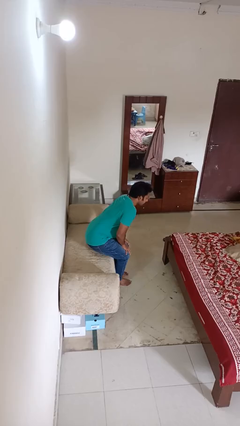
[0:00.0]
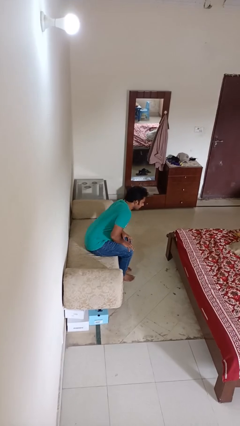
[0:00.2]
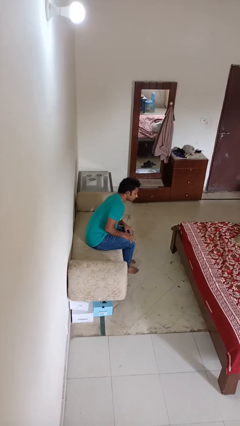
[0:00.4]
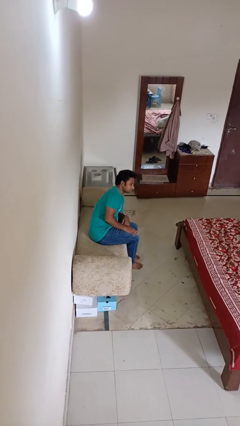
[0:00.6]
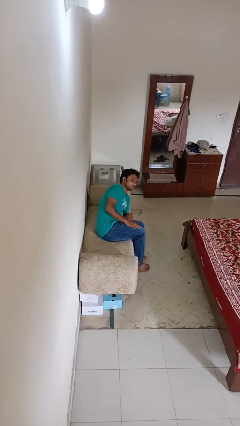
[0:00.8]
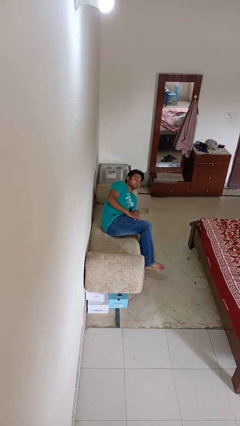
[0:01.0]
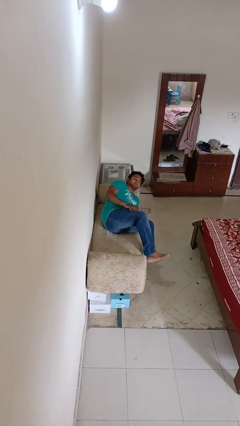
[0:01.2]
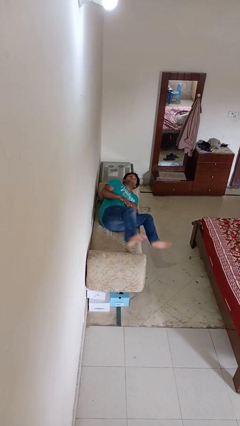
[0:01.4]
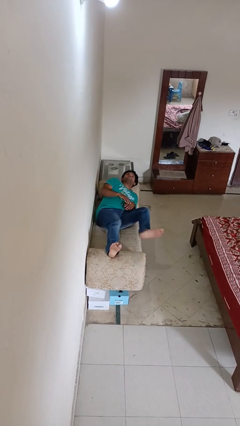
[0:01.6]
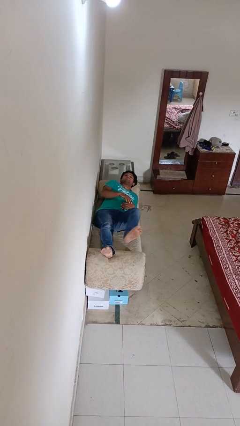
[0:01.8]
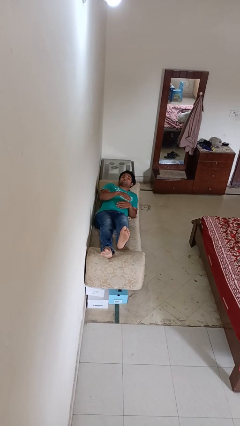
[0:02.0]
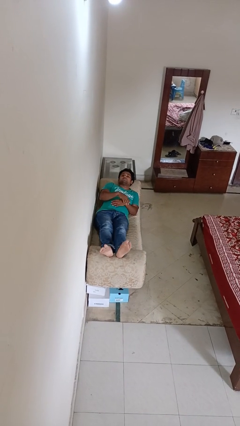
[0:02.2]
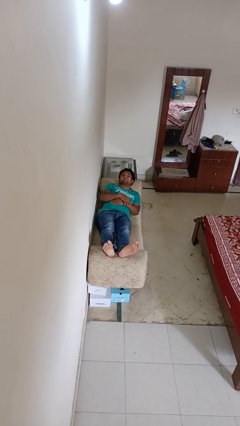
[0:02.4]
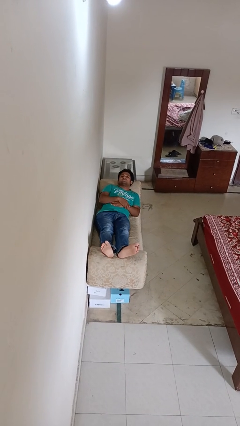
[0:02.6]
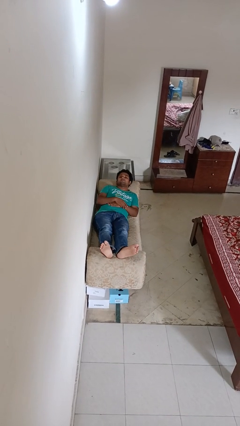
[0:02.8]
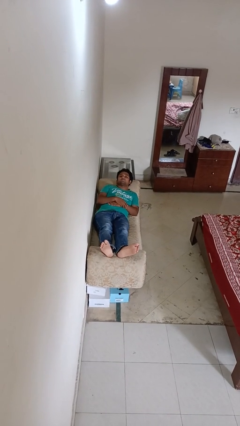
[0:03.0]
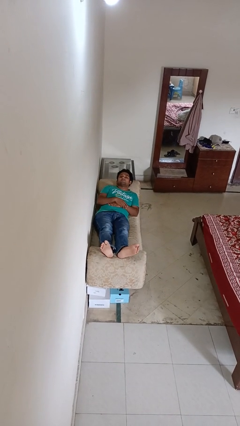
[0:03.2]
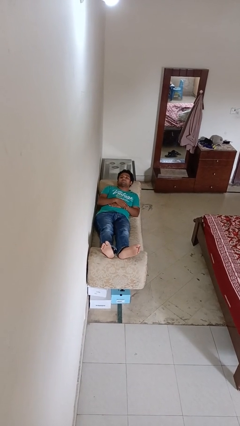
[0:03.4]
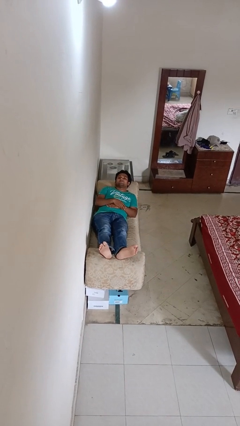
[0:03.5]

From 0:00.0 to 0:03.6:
person lies down on couch

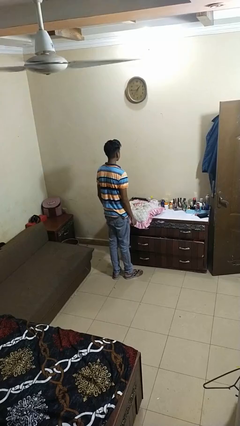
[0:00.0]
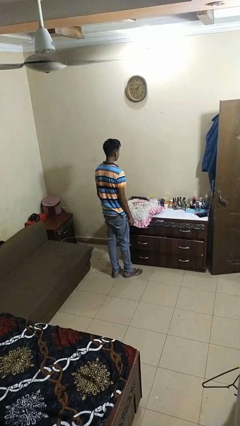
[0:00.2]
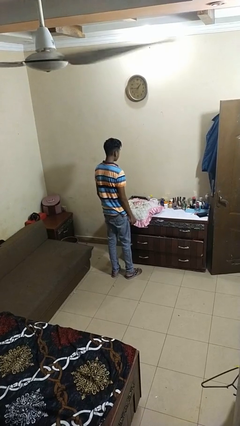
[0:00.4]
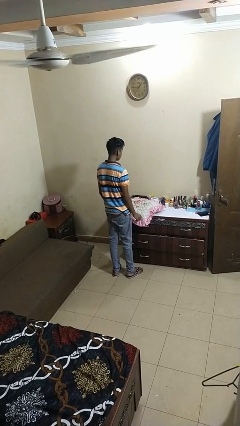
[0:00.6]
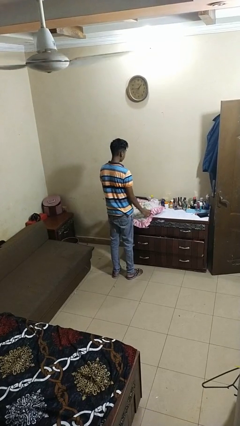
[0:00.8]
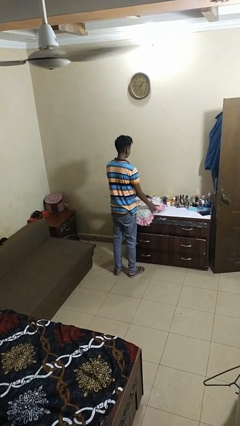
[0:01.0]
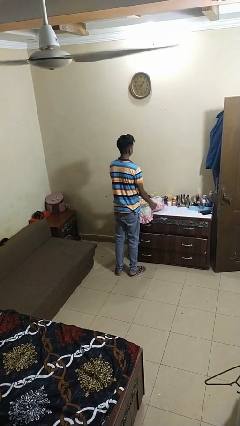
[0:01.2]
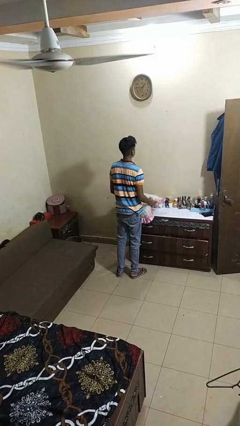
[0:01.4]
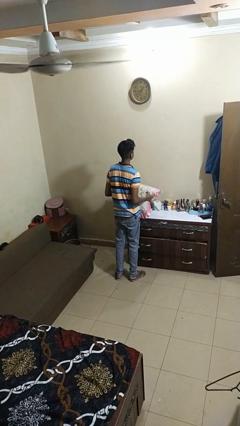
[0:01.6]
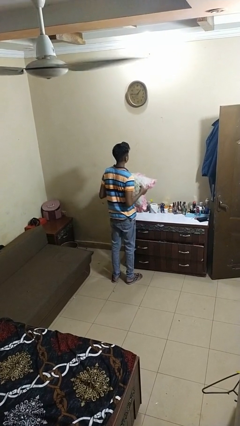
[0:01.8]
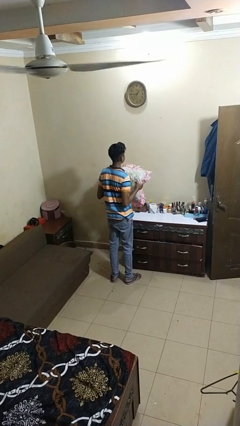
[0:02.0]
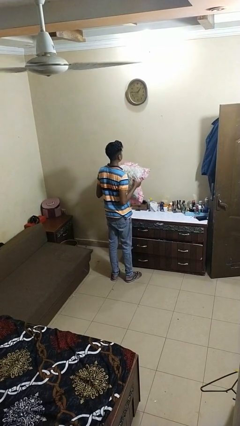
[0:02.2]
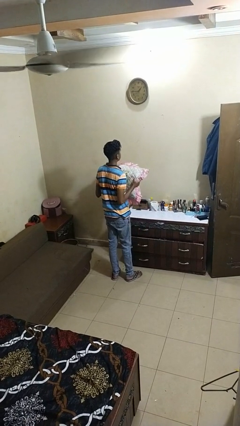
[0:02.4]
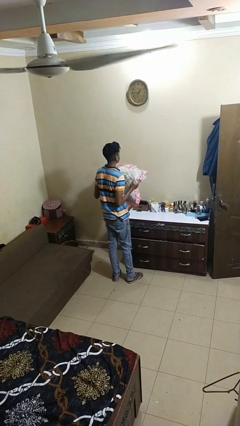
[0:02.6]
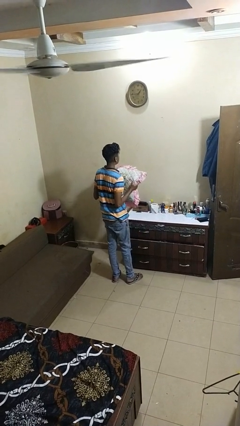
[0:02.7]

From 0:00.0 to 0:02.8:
person picks up object from countertop

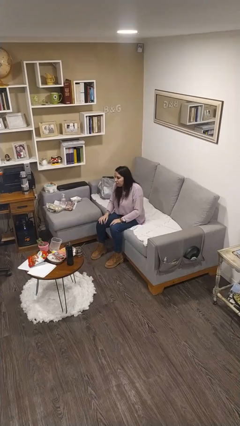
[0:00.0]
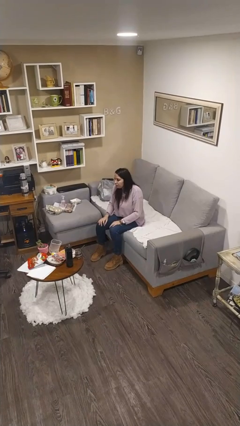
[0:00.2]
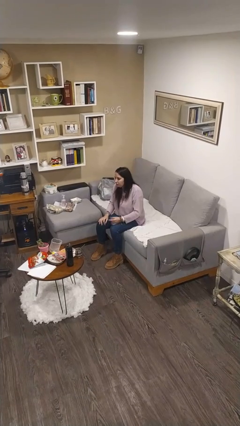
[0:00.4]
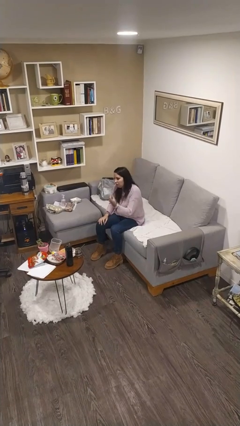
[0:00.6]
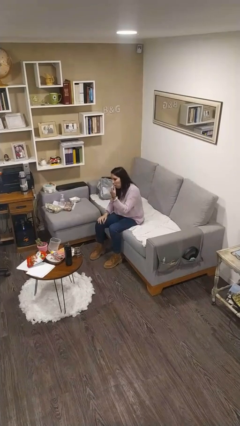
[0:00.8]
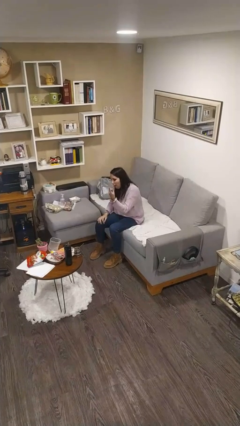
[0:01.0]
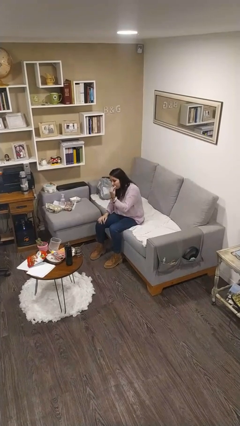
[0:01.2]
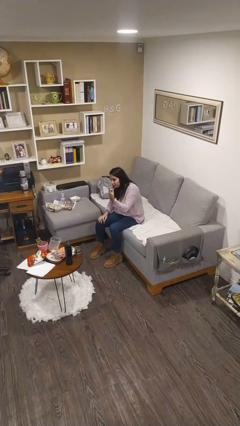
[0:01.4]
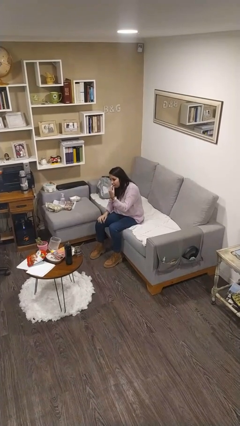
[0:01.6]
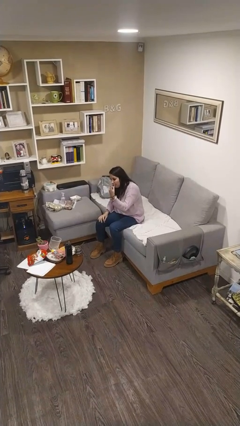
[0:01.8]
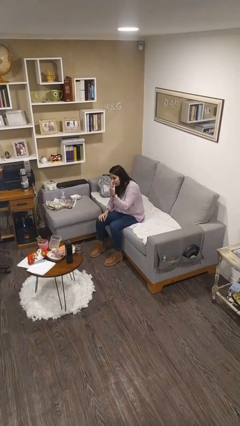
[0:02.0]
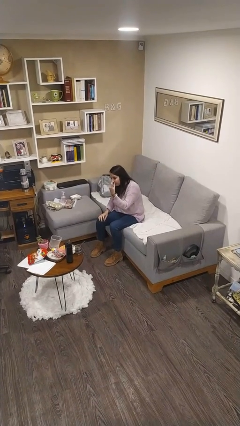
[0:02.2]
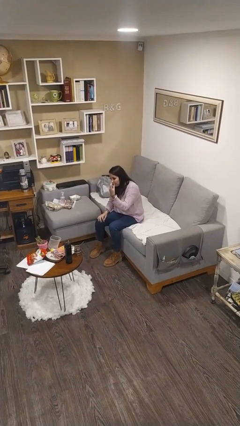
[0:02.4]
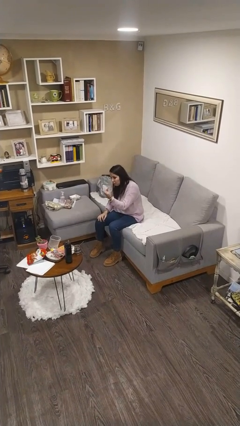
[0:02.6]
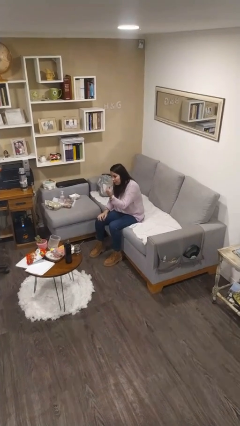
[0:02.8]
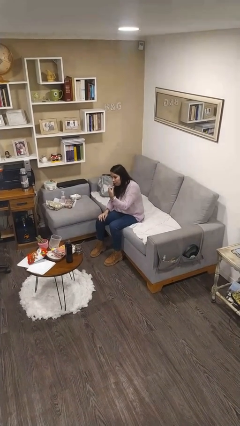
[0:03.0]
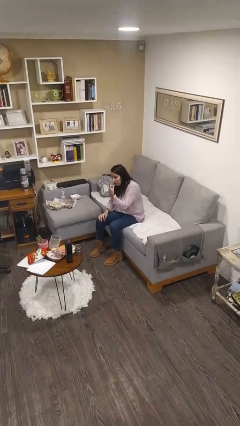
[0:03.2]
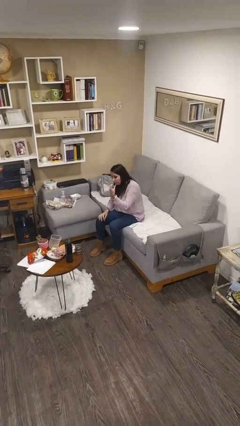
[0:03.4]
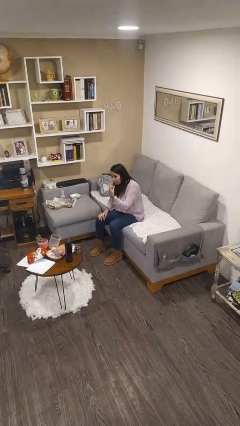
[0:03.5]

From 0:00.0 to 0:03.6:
person gestures come here

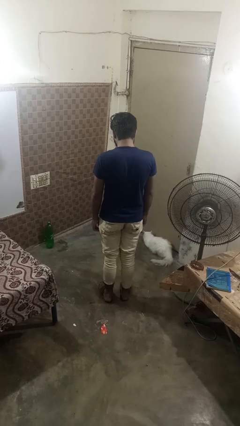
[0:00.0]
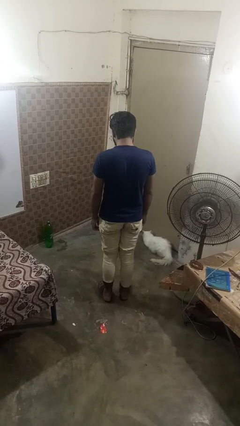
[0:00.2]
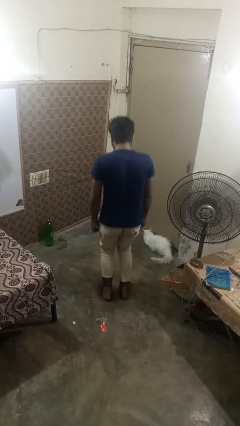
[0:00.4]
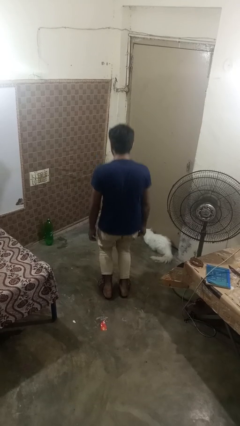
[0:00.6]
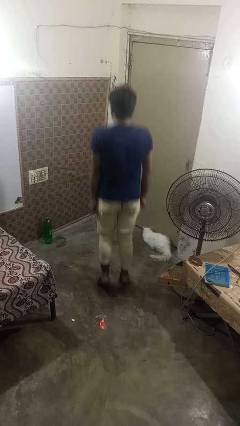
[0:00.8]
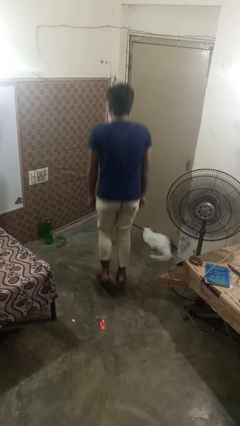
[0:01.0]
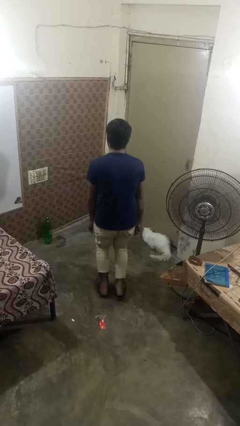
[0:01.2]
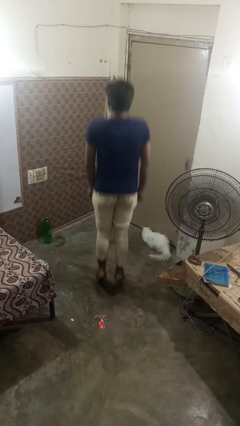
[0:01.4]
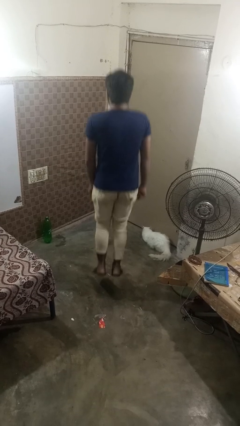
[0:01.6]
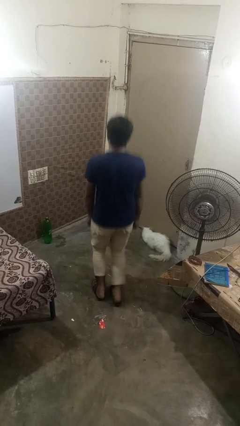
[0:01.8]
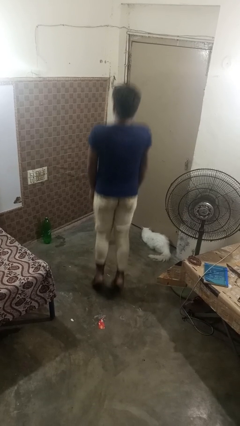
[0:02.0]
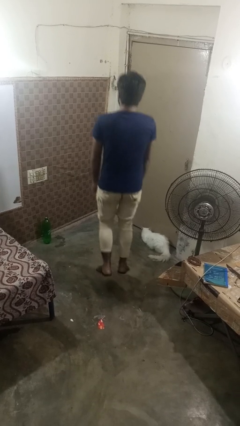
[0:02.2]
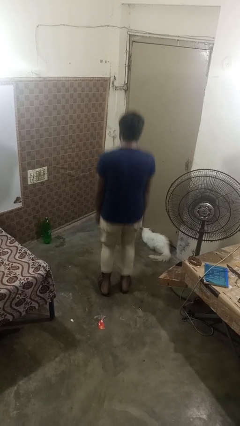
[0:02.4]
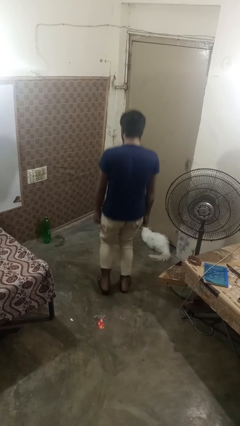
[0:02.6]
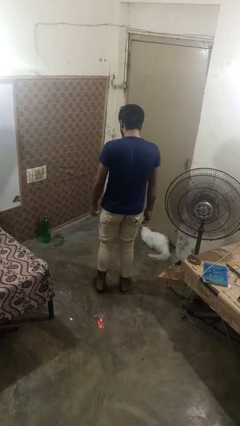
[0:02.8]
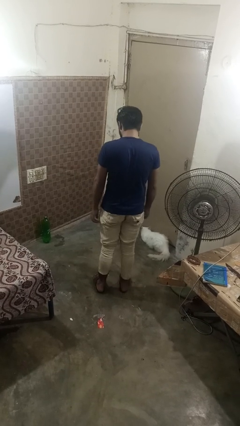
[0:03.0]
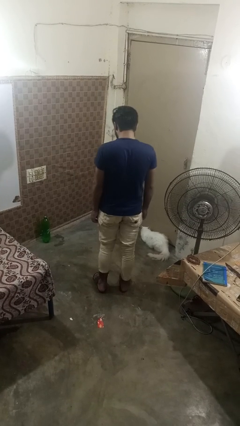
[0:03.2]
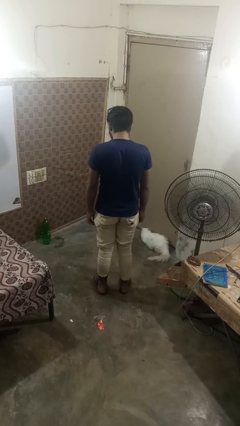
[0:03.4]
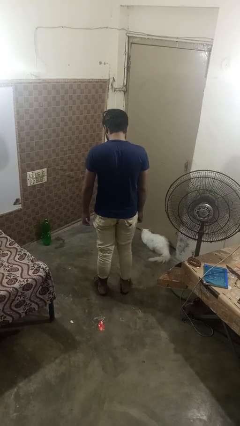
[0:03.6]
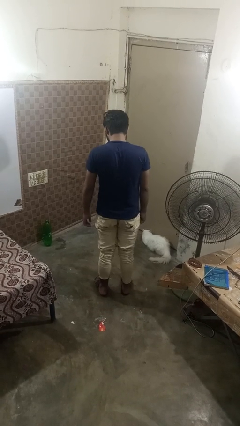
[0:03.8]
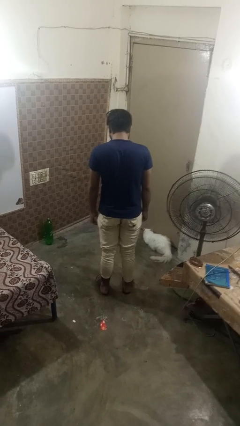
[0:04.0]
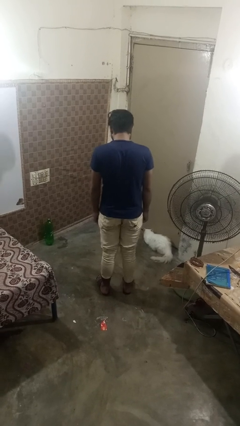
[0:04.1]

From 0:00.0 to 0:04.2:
person jumps

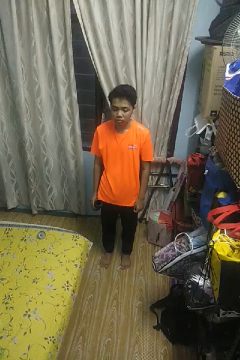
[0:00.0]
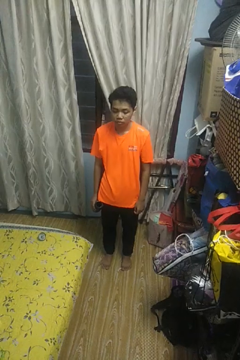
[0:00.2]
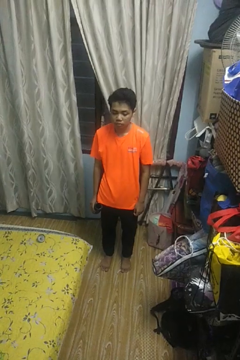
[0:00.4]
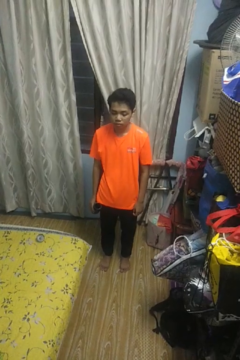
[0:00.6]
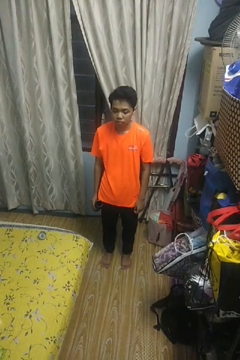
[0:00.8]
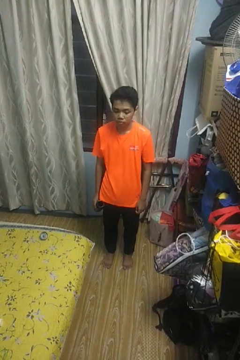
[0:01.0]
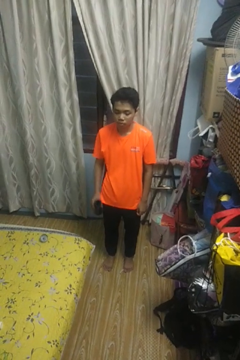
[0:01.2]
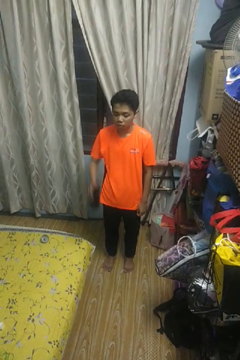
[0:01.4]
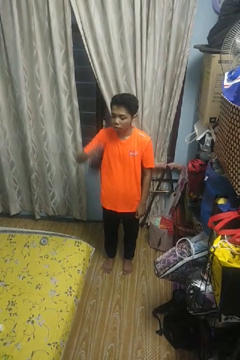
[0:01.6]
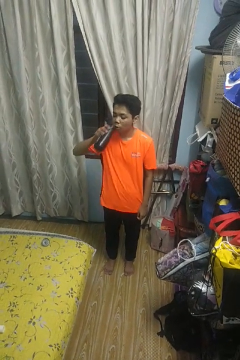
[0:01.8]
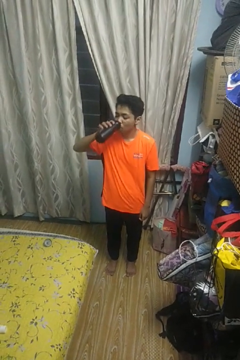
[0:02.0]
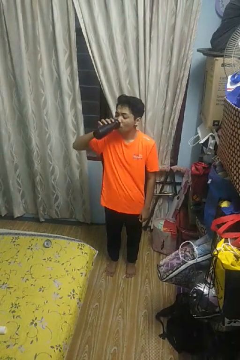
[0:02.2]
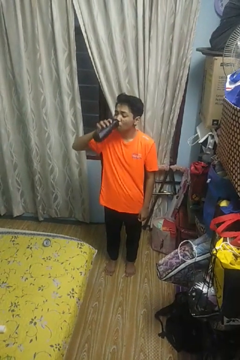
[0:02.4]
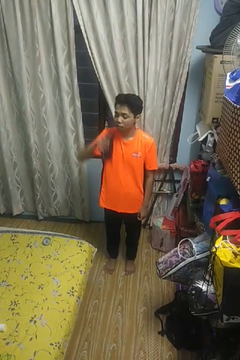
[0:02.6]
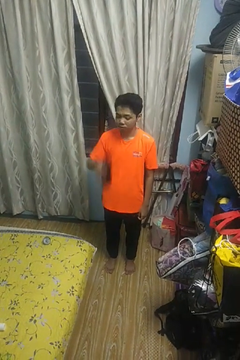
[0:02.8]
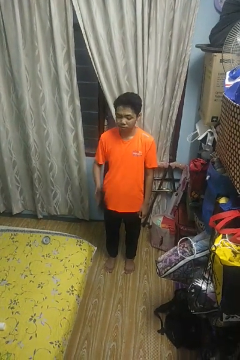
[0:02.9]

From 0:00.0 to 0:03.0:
person drinks from bottle

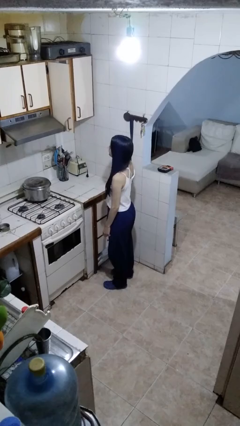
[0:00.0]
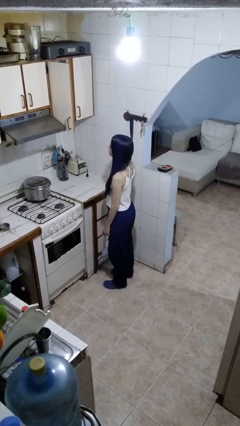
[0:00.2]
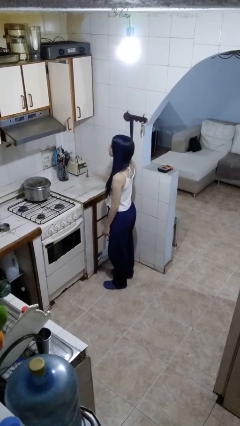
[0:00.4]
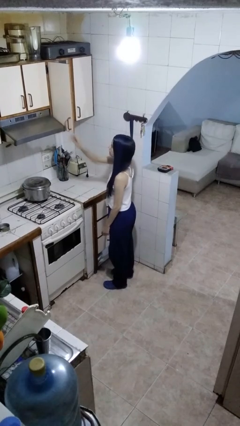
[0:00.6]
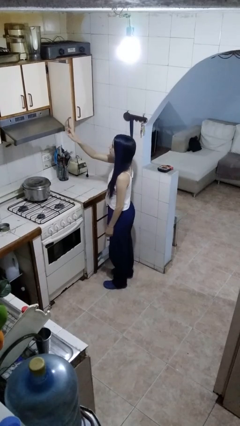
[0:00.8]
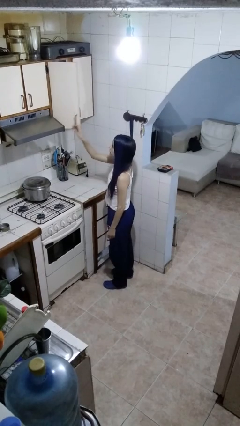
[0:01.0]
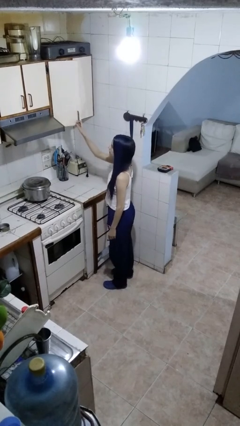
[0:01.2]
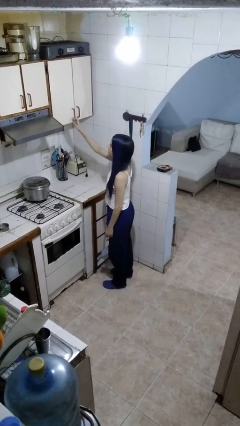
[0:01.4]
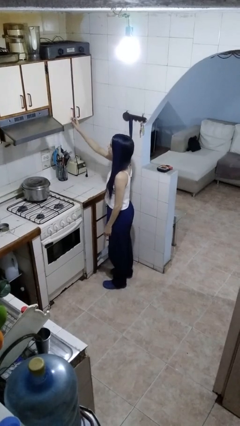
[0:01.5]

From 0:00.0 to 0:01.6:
person closes cabinet
